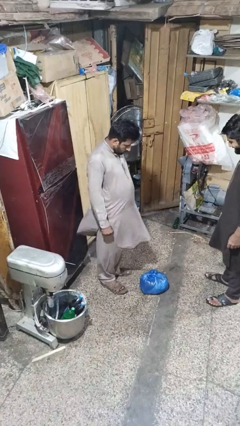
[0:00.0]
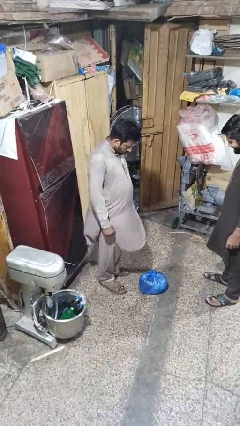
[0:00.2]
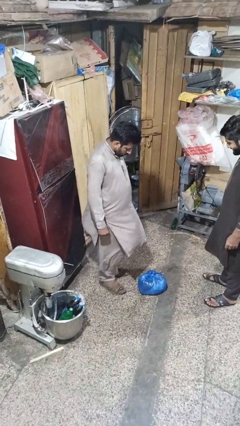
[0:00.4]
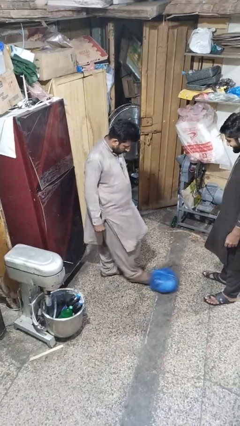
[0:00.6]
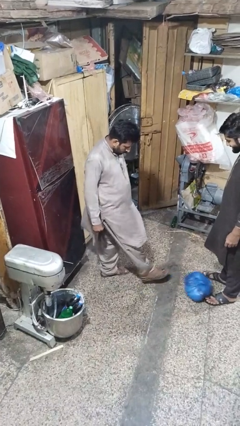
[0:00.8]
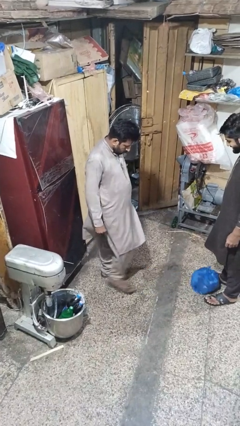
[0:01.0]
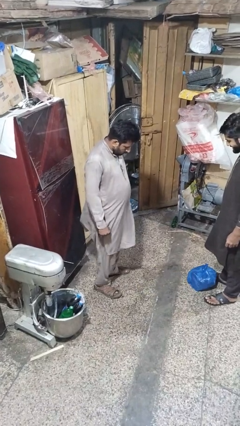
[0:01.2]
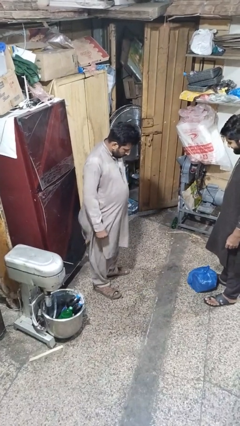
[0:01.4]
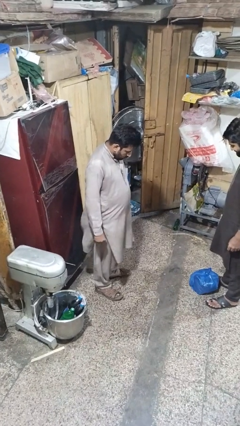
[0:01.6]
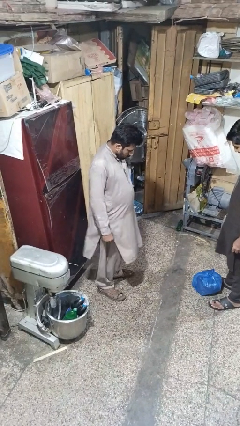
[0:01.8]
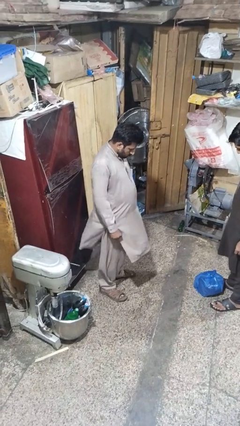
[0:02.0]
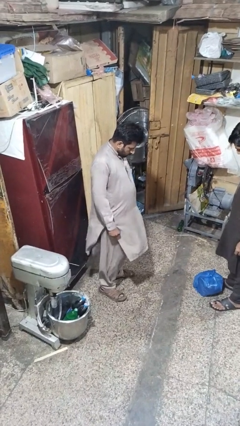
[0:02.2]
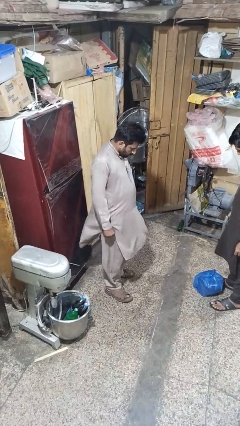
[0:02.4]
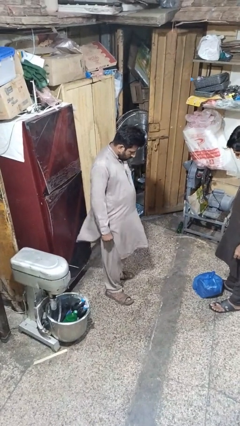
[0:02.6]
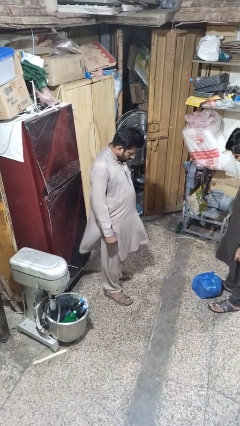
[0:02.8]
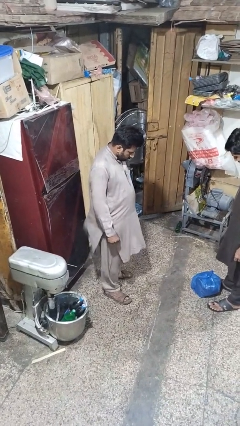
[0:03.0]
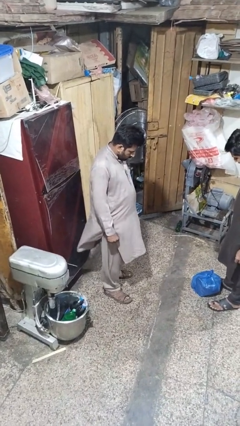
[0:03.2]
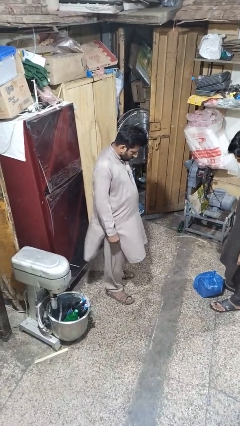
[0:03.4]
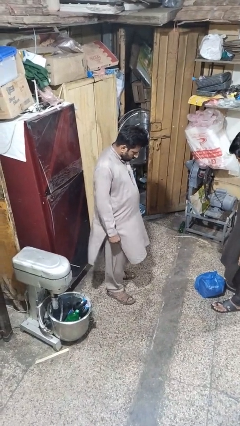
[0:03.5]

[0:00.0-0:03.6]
person kicks object to person

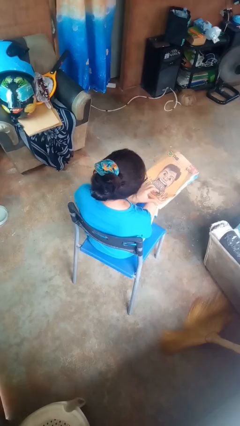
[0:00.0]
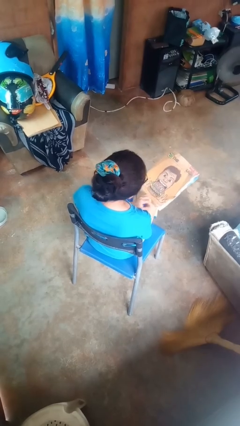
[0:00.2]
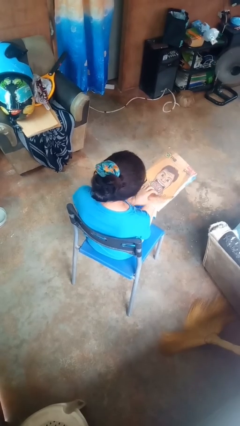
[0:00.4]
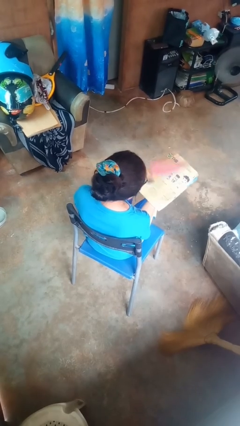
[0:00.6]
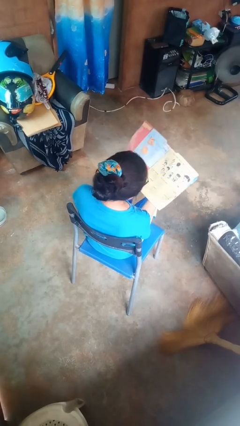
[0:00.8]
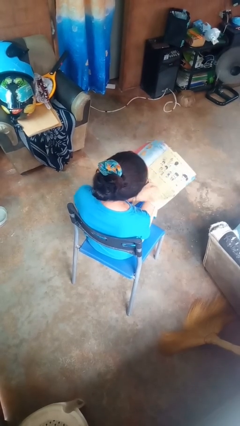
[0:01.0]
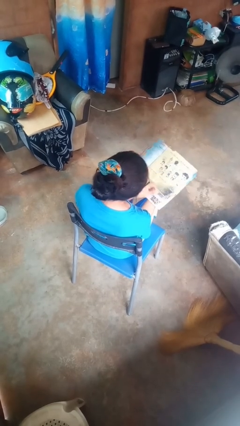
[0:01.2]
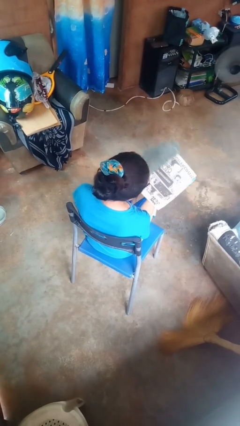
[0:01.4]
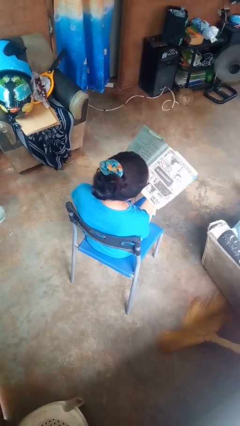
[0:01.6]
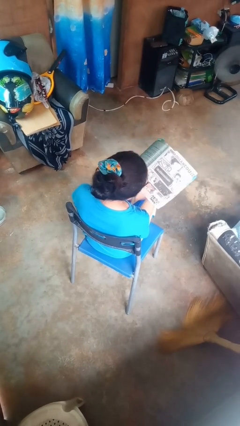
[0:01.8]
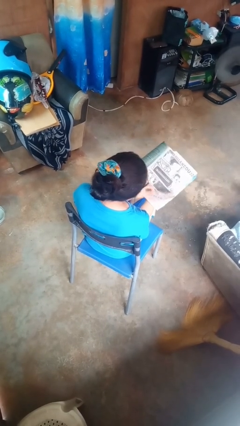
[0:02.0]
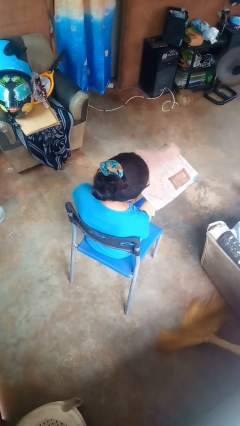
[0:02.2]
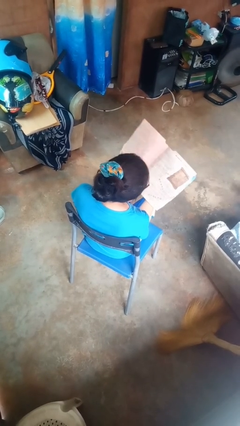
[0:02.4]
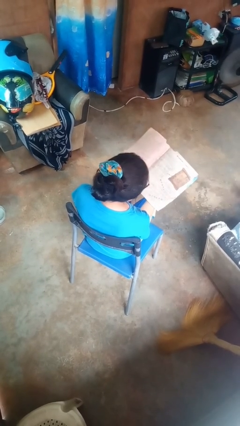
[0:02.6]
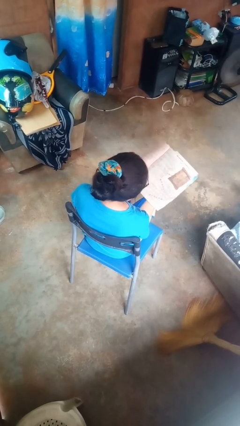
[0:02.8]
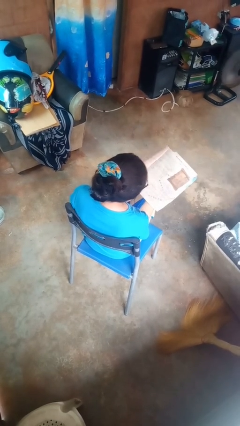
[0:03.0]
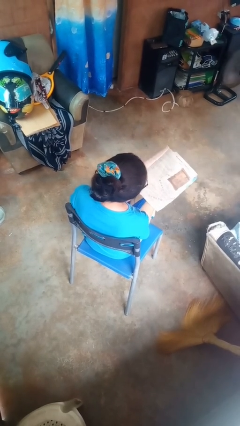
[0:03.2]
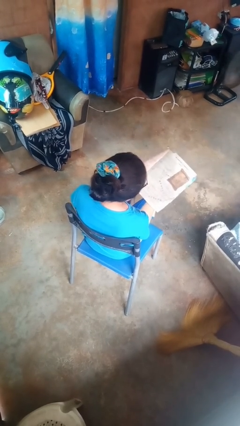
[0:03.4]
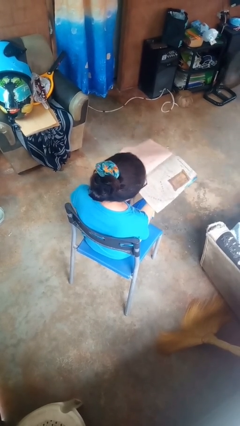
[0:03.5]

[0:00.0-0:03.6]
person reads magazine

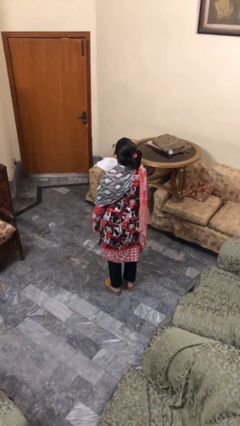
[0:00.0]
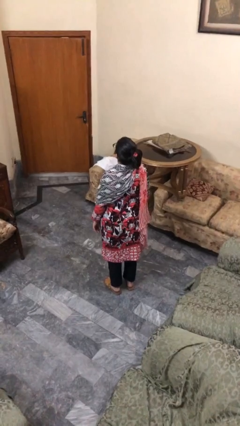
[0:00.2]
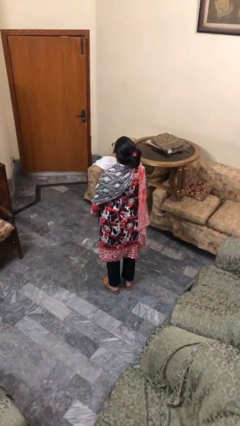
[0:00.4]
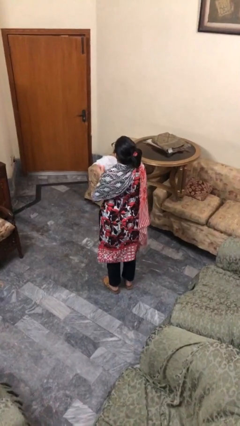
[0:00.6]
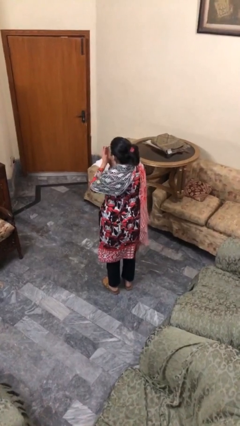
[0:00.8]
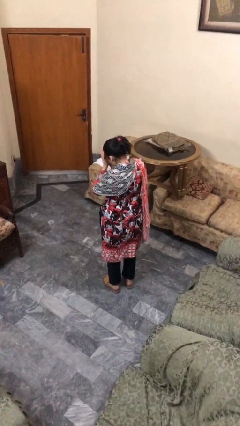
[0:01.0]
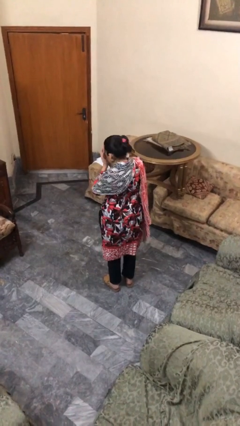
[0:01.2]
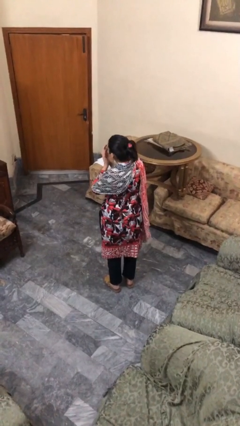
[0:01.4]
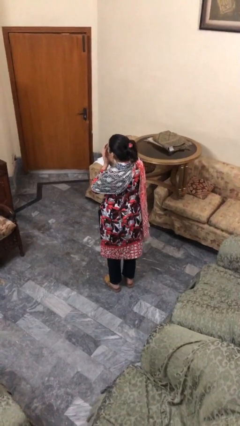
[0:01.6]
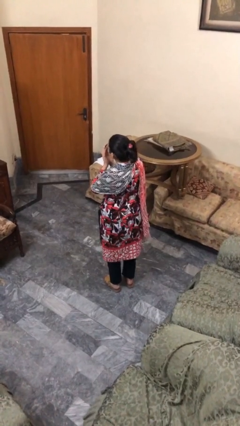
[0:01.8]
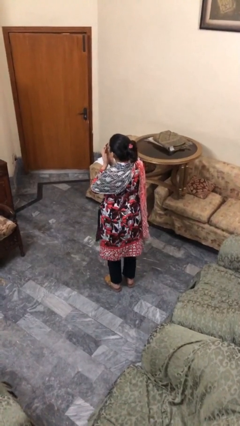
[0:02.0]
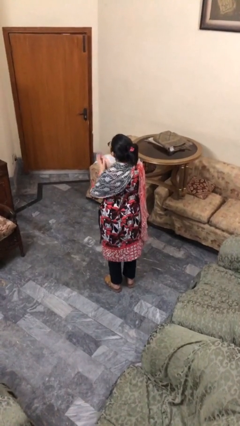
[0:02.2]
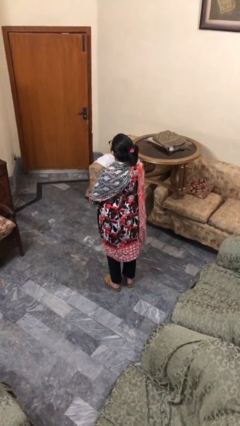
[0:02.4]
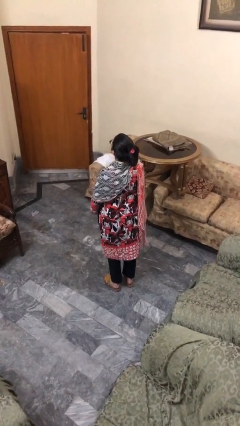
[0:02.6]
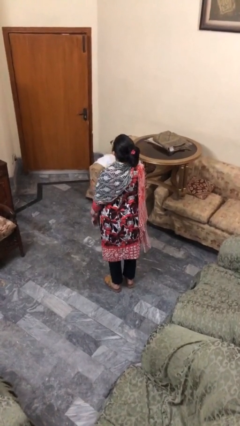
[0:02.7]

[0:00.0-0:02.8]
person sneezes into hand

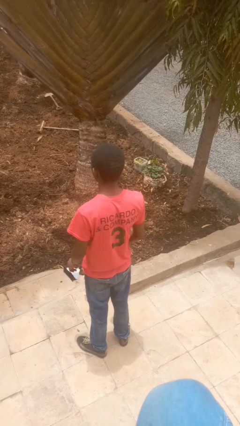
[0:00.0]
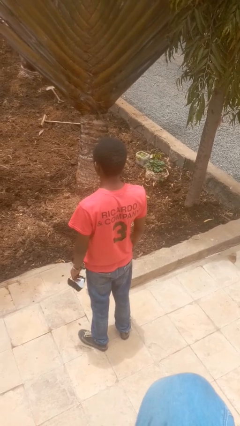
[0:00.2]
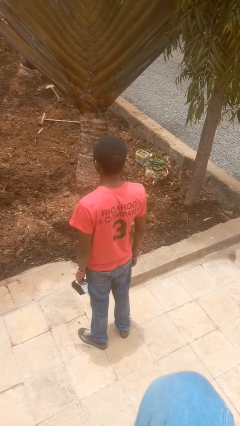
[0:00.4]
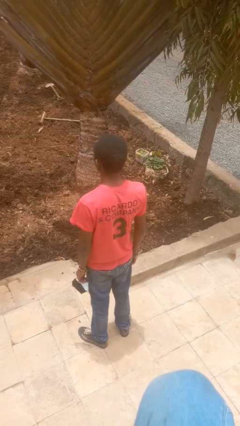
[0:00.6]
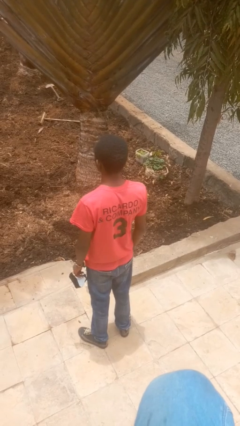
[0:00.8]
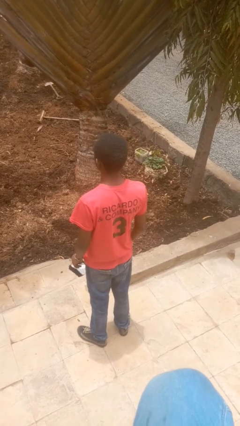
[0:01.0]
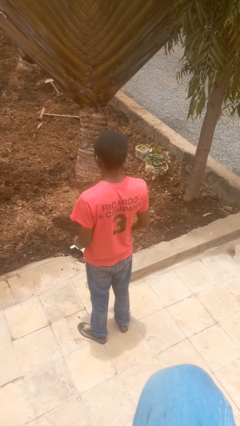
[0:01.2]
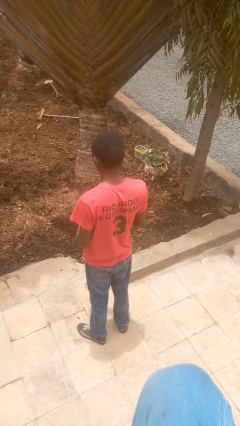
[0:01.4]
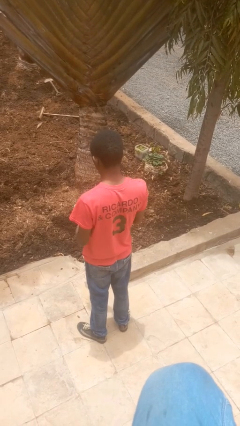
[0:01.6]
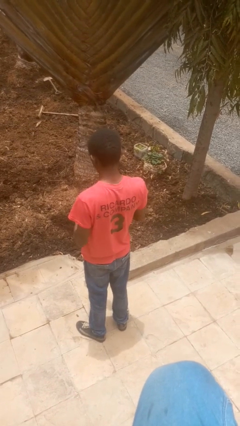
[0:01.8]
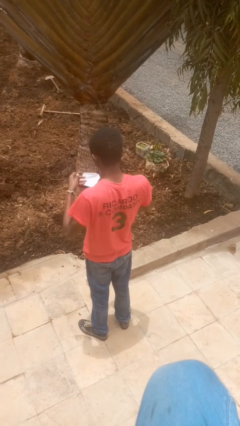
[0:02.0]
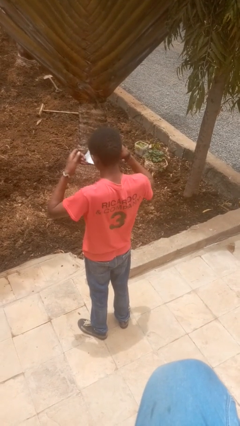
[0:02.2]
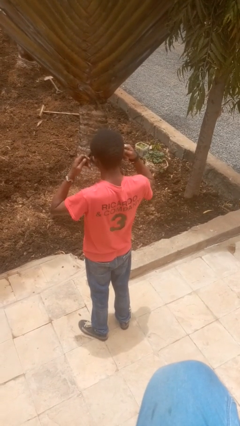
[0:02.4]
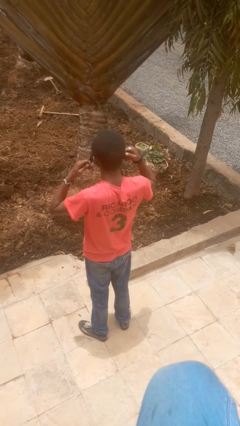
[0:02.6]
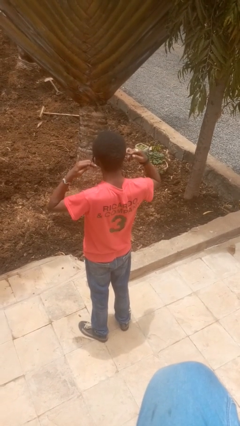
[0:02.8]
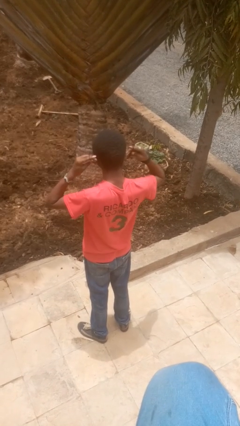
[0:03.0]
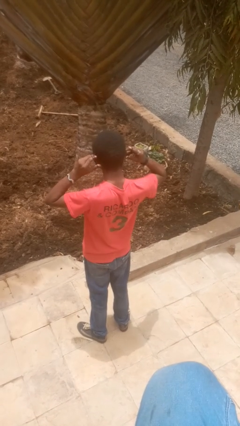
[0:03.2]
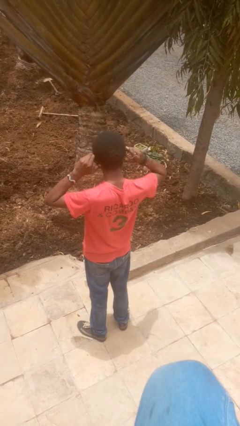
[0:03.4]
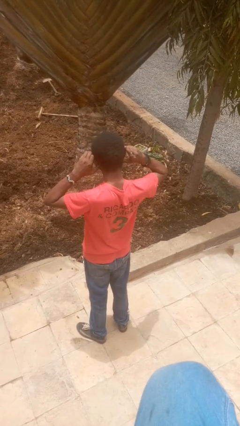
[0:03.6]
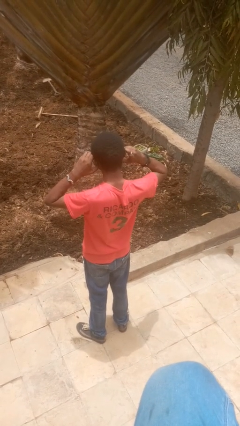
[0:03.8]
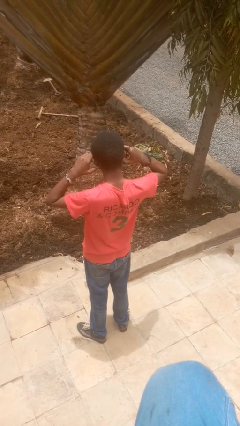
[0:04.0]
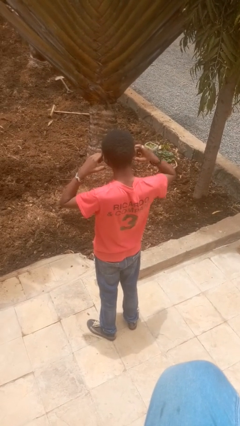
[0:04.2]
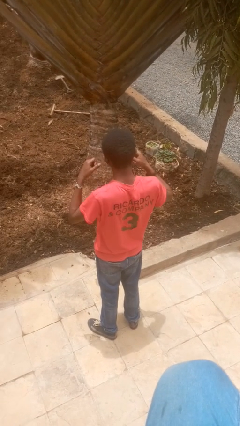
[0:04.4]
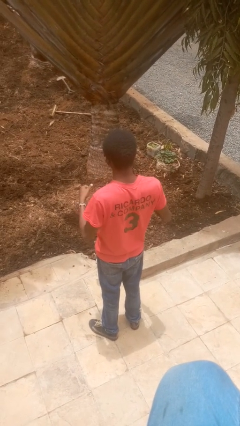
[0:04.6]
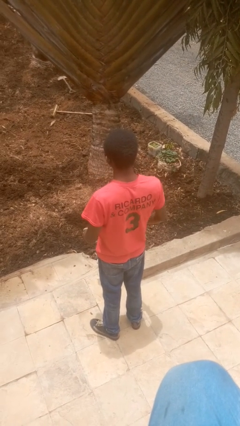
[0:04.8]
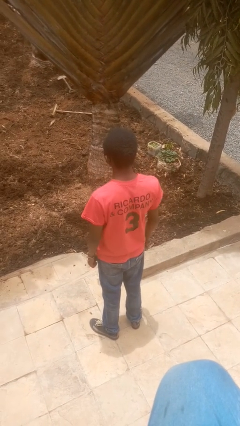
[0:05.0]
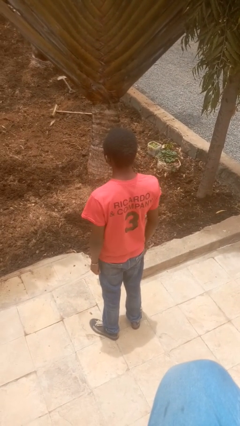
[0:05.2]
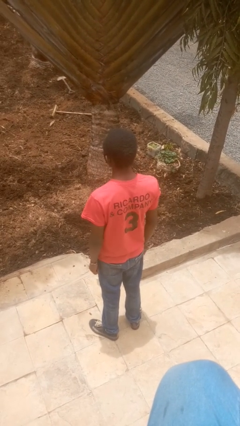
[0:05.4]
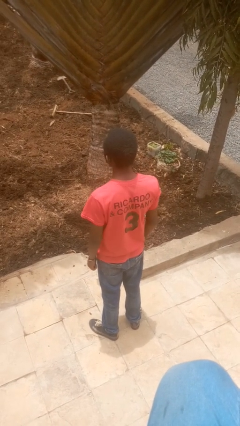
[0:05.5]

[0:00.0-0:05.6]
person puts on facemask

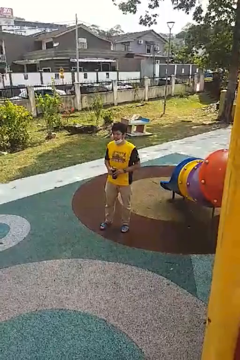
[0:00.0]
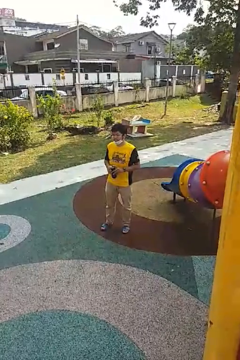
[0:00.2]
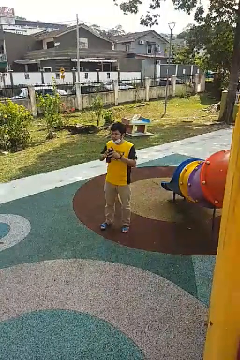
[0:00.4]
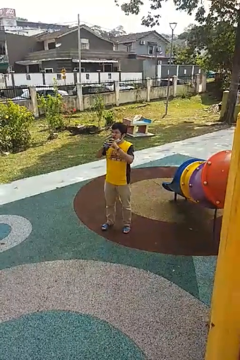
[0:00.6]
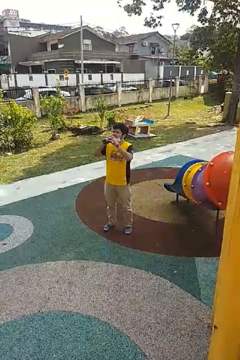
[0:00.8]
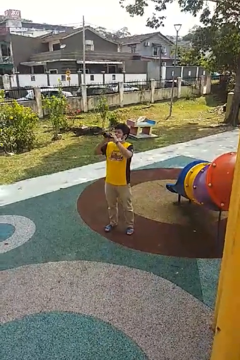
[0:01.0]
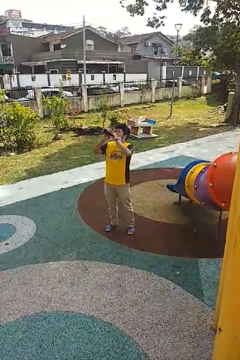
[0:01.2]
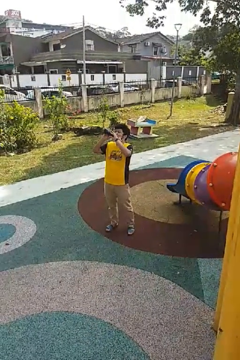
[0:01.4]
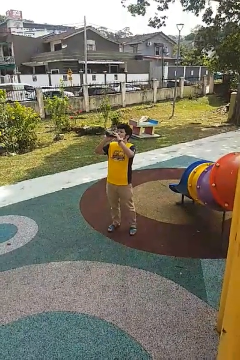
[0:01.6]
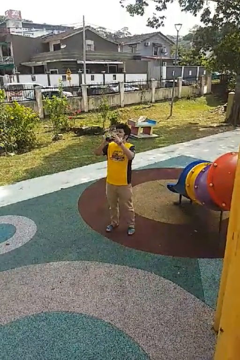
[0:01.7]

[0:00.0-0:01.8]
person drinks from bottle

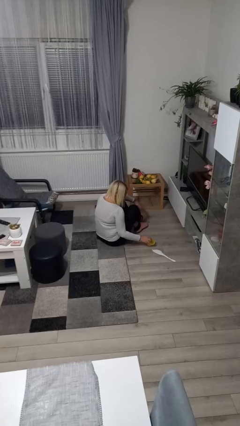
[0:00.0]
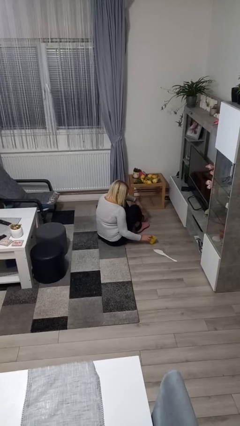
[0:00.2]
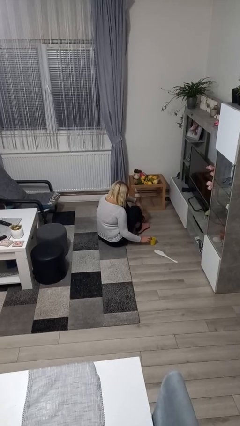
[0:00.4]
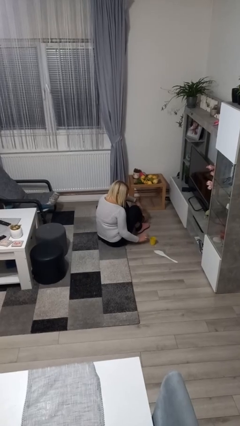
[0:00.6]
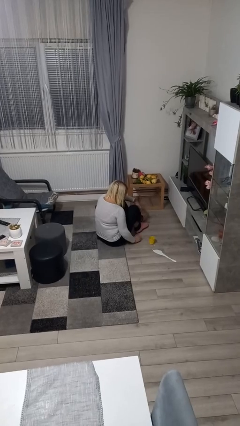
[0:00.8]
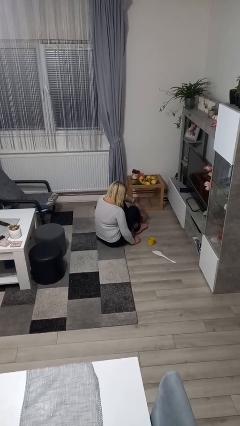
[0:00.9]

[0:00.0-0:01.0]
person sets upright glass
